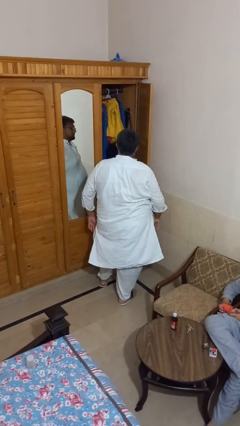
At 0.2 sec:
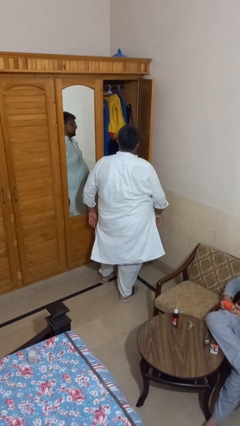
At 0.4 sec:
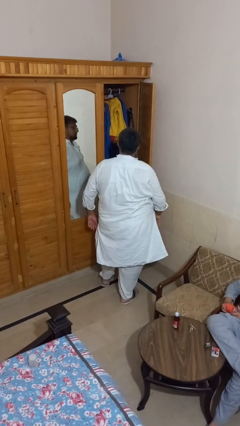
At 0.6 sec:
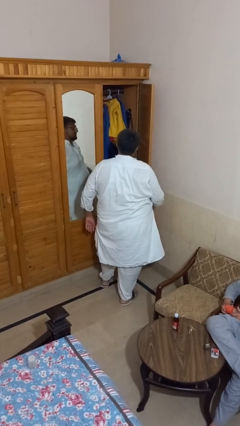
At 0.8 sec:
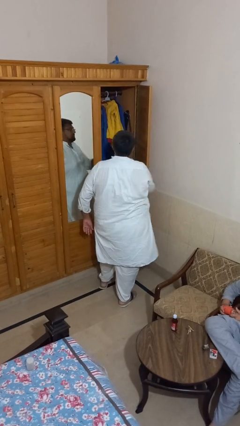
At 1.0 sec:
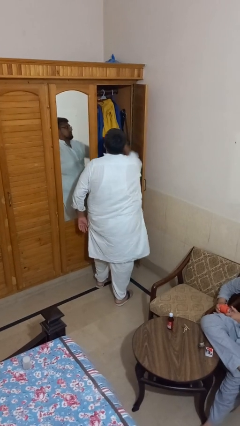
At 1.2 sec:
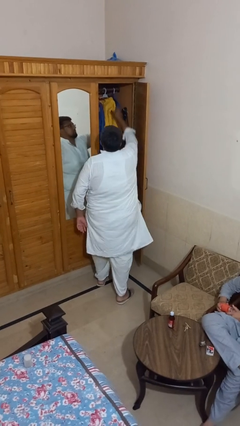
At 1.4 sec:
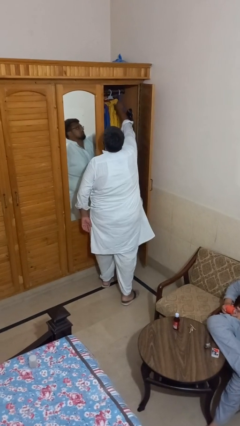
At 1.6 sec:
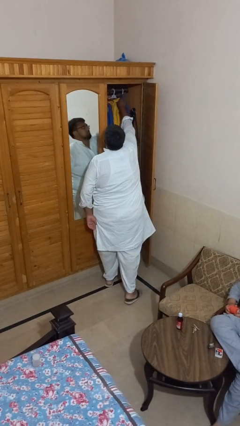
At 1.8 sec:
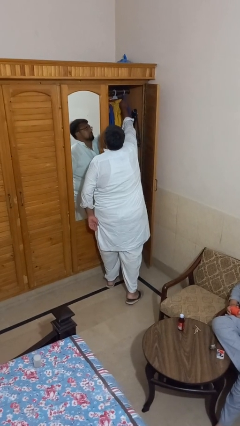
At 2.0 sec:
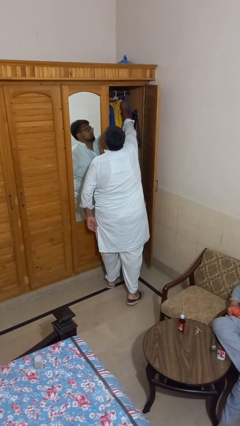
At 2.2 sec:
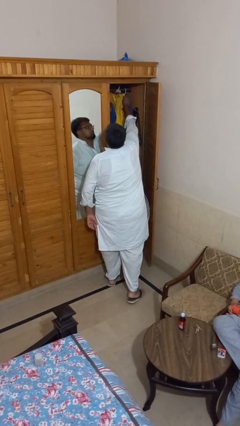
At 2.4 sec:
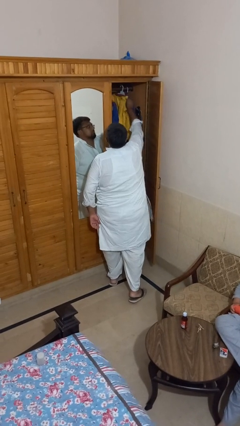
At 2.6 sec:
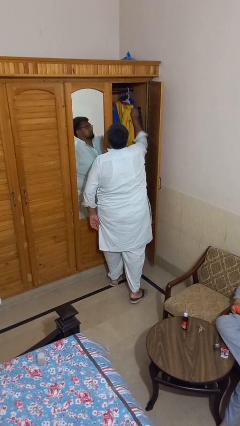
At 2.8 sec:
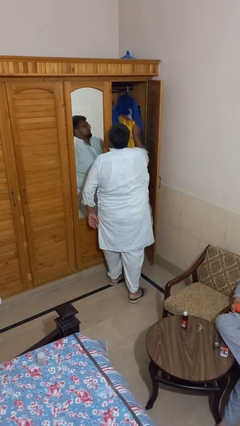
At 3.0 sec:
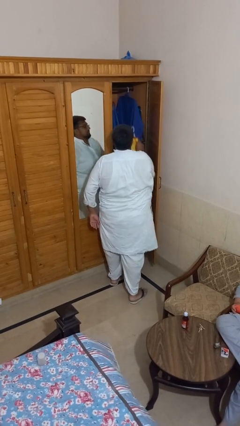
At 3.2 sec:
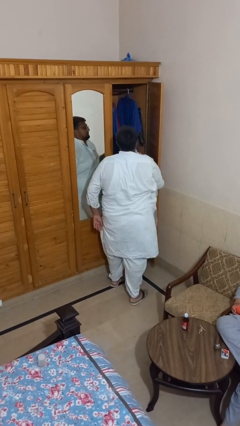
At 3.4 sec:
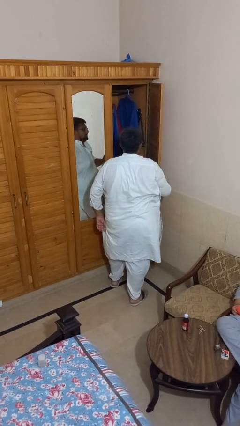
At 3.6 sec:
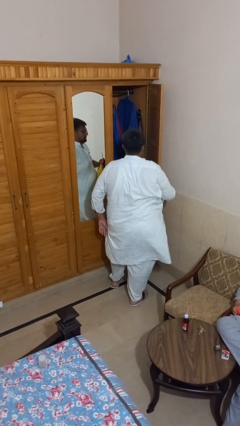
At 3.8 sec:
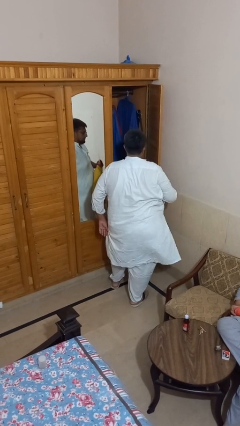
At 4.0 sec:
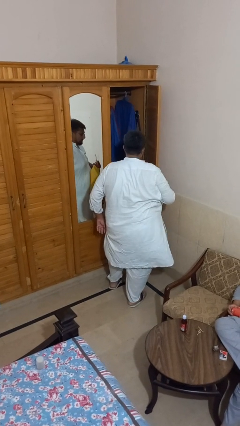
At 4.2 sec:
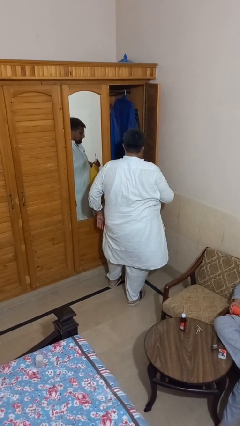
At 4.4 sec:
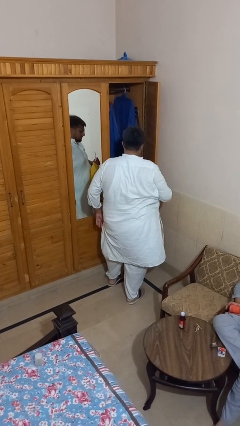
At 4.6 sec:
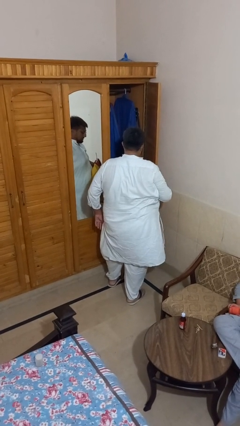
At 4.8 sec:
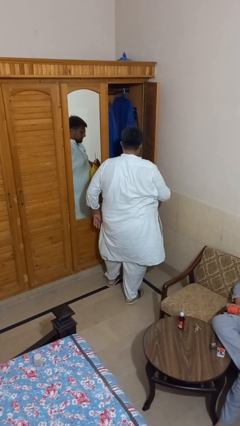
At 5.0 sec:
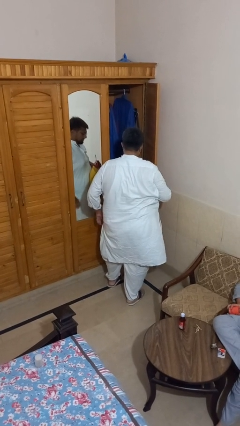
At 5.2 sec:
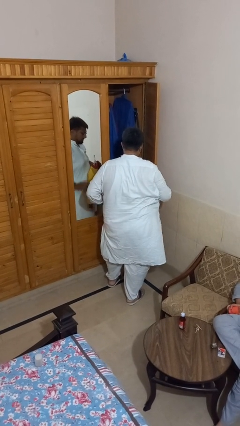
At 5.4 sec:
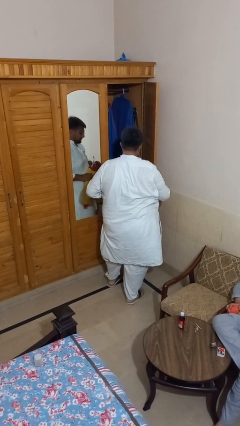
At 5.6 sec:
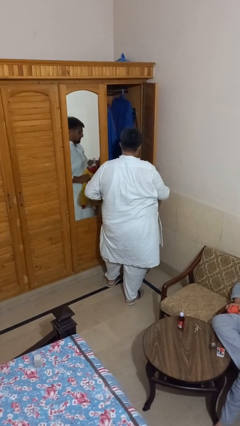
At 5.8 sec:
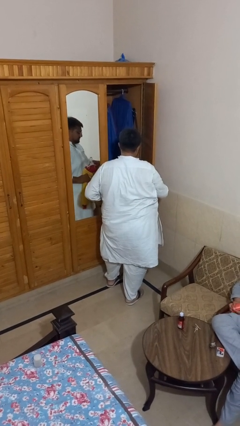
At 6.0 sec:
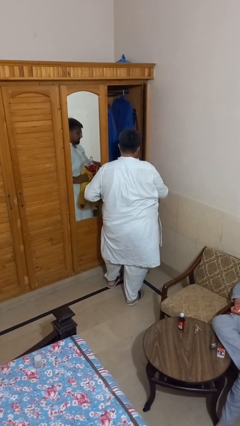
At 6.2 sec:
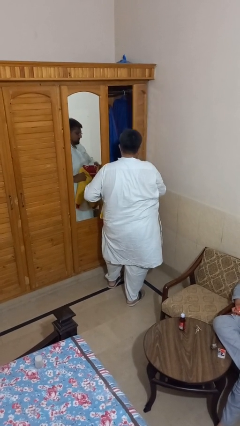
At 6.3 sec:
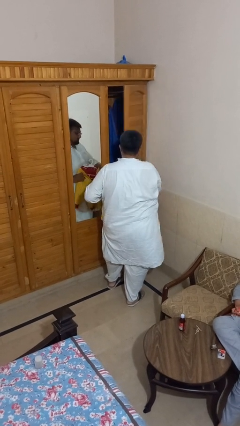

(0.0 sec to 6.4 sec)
person takes clothes from closet

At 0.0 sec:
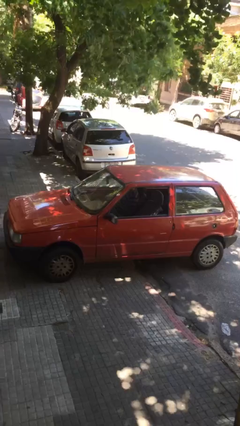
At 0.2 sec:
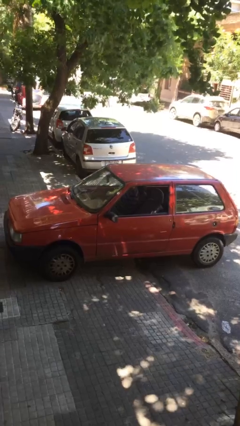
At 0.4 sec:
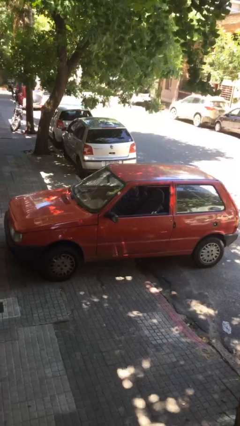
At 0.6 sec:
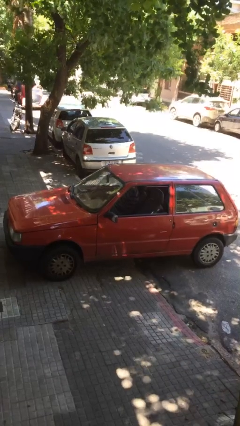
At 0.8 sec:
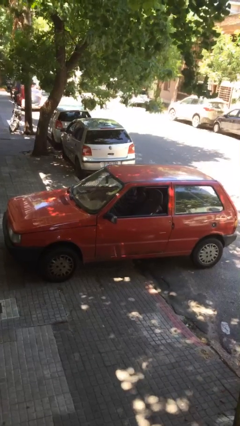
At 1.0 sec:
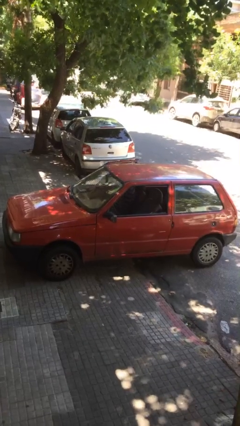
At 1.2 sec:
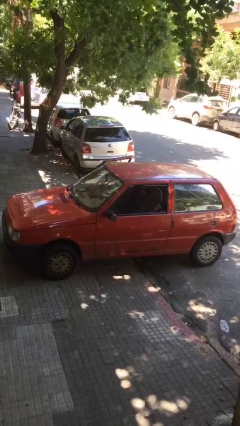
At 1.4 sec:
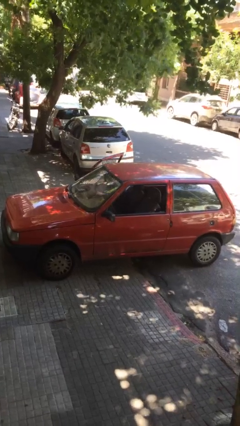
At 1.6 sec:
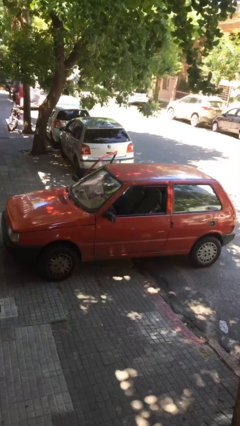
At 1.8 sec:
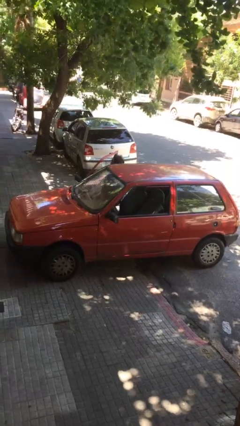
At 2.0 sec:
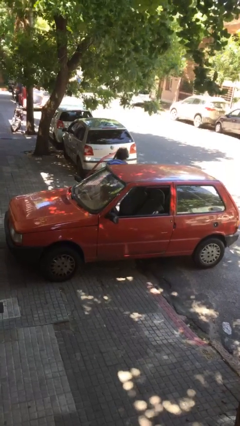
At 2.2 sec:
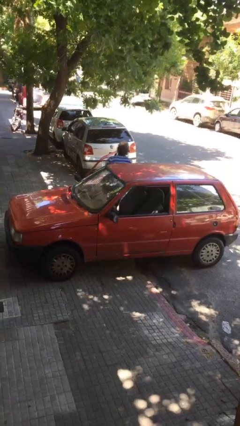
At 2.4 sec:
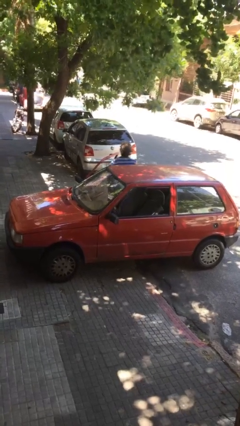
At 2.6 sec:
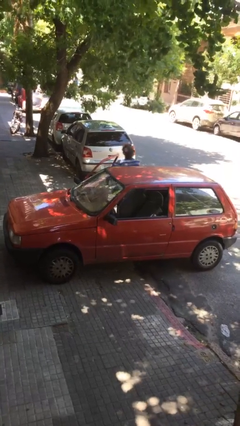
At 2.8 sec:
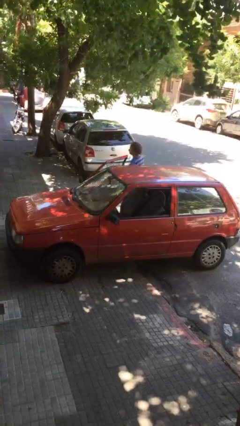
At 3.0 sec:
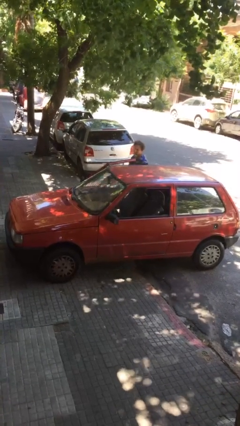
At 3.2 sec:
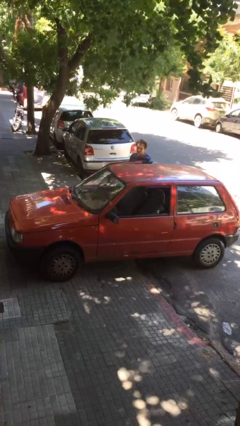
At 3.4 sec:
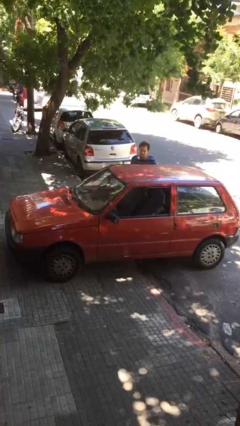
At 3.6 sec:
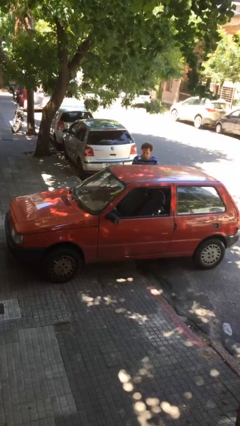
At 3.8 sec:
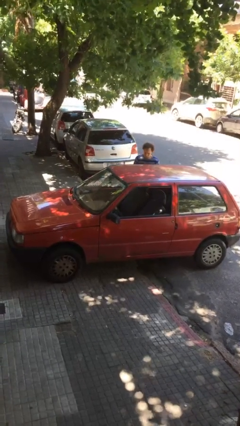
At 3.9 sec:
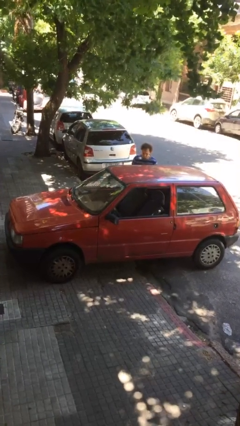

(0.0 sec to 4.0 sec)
car drops off person

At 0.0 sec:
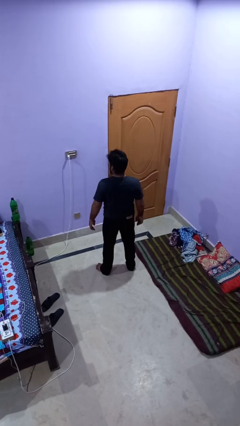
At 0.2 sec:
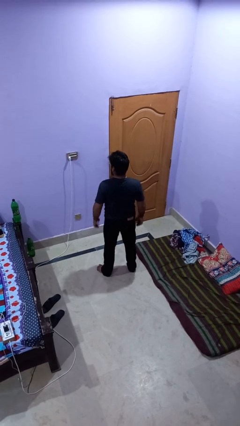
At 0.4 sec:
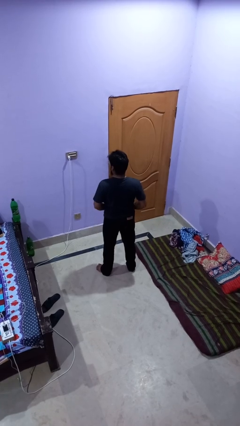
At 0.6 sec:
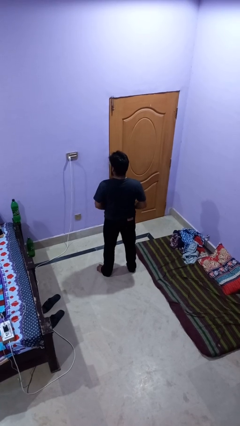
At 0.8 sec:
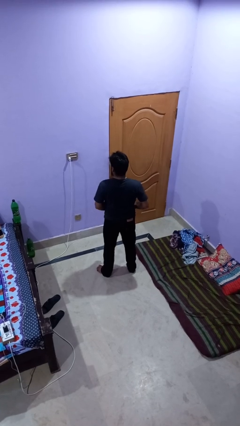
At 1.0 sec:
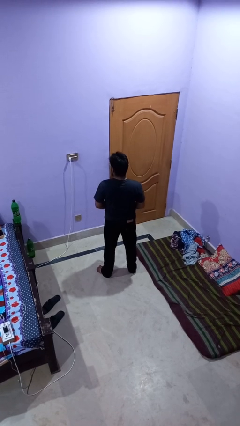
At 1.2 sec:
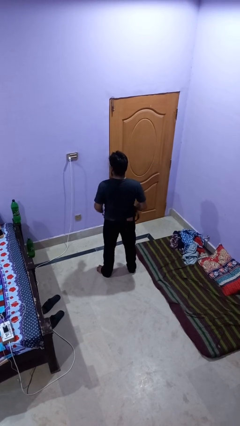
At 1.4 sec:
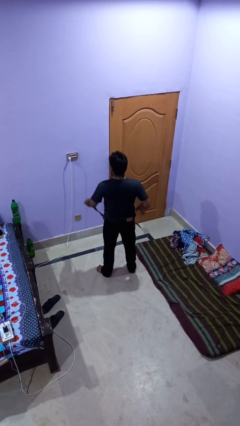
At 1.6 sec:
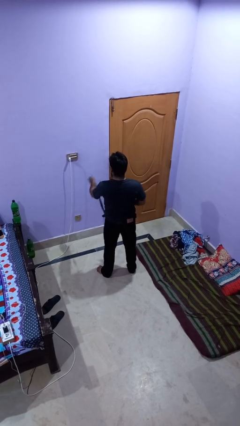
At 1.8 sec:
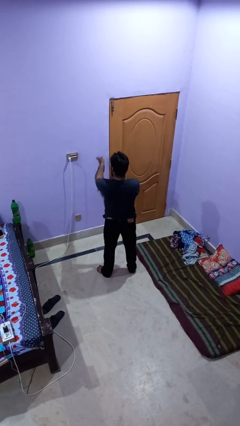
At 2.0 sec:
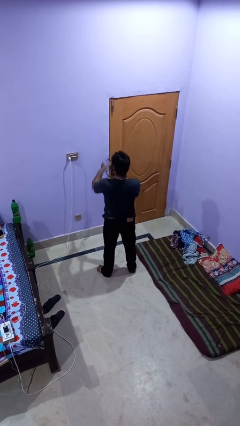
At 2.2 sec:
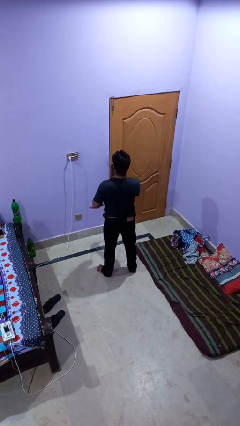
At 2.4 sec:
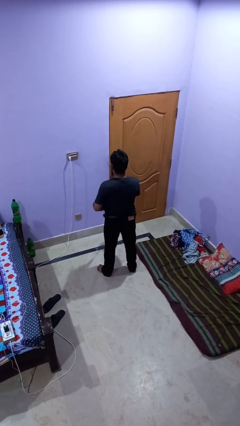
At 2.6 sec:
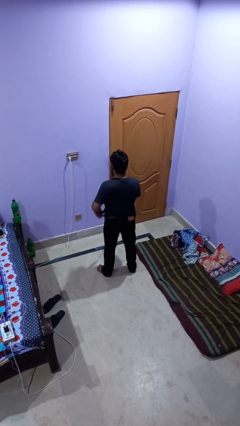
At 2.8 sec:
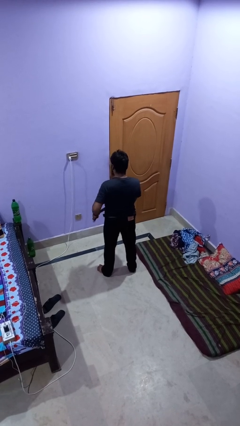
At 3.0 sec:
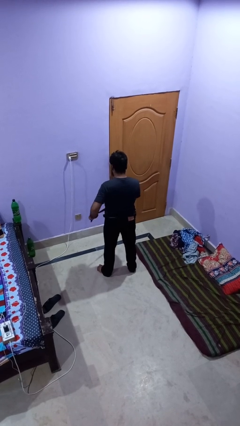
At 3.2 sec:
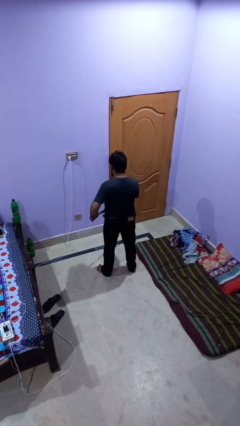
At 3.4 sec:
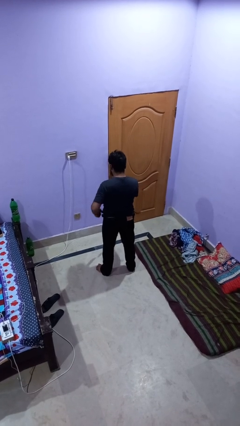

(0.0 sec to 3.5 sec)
person takes off belt

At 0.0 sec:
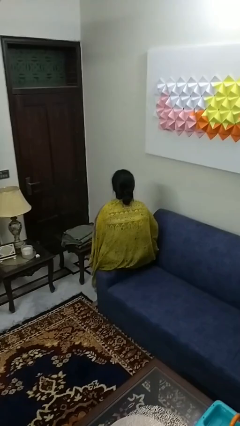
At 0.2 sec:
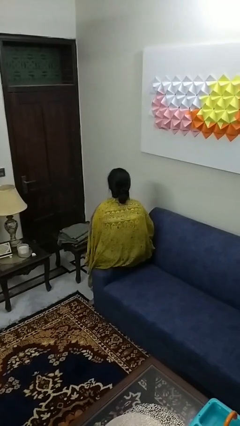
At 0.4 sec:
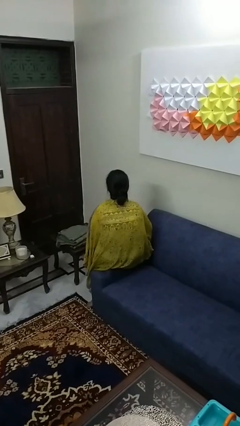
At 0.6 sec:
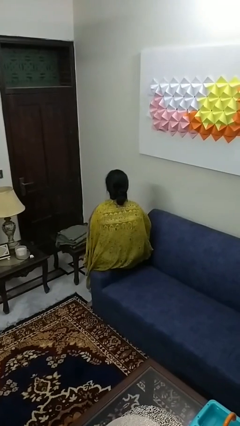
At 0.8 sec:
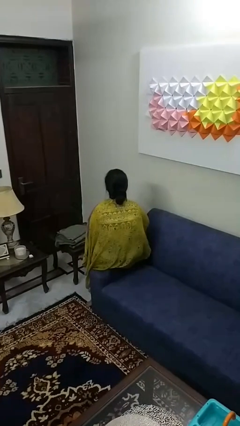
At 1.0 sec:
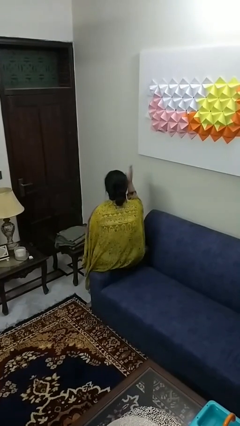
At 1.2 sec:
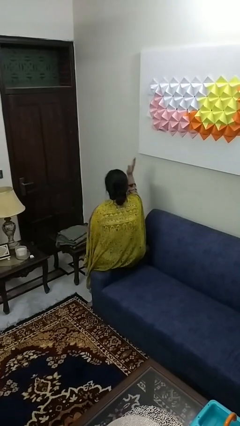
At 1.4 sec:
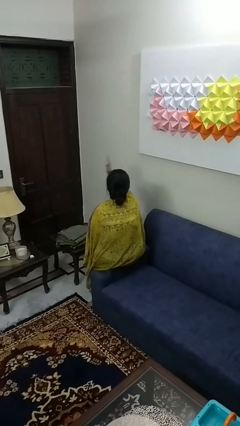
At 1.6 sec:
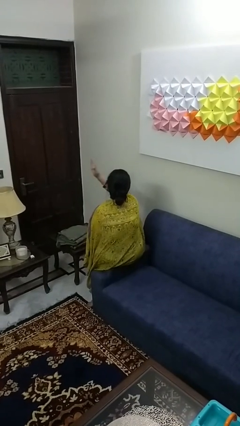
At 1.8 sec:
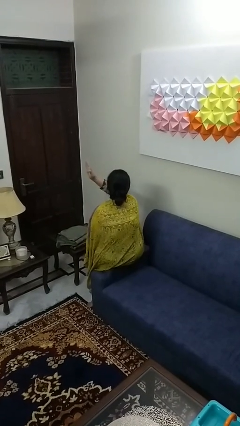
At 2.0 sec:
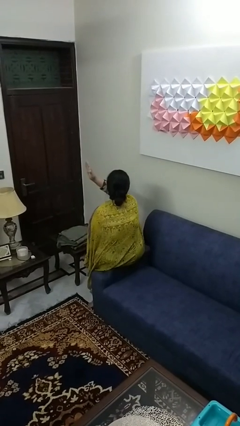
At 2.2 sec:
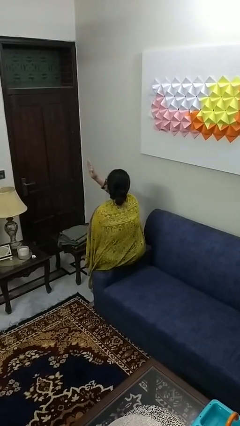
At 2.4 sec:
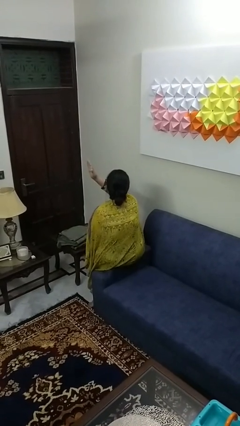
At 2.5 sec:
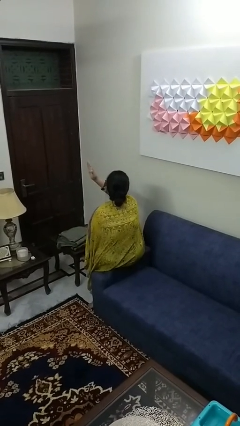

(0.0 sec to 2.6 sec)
person gestures swipe left

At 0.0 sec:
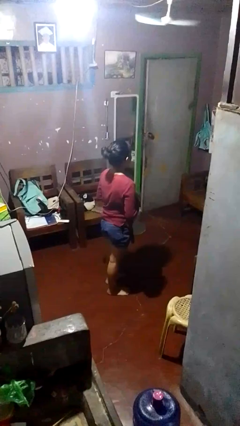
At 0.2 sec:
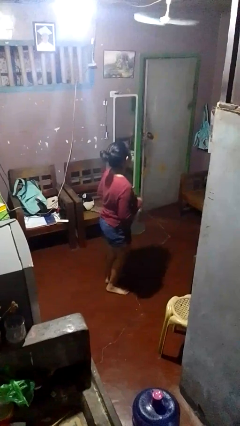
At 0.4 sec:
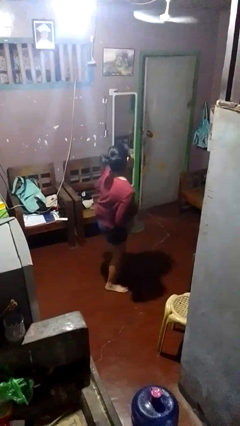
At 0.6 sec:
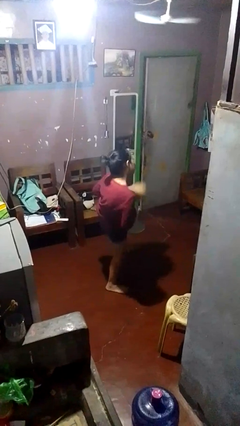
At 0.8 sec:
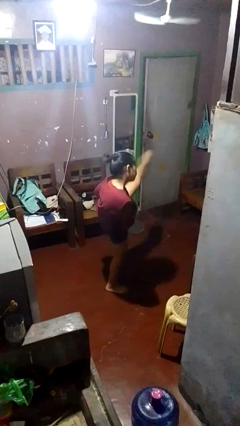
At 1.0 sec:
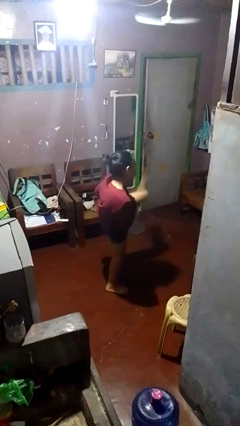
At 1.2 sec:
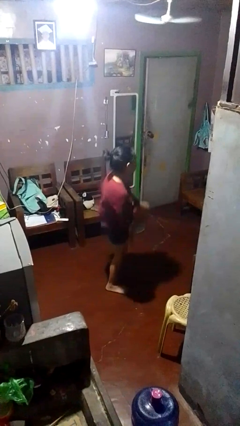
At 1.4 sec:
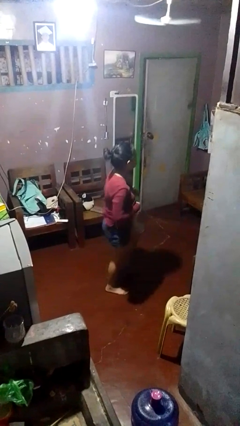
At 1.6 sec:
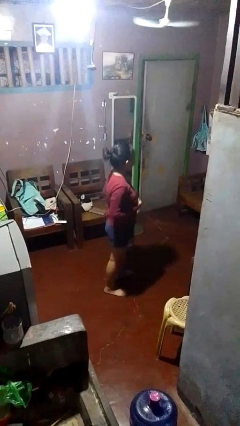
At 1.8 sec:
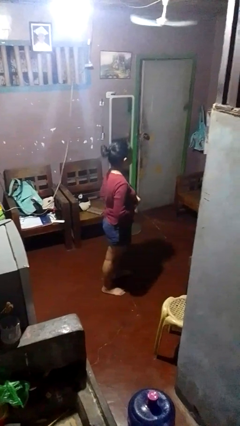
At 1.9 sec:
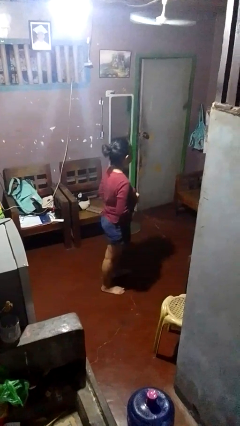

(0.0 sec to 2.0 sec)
person karate kicks
